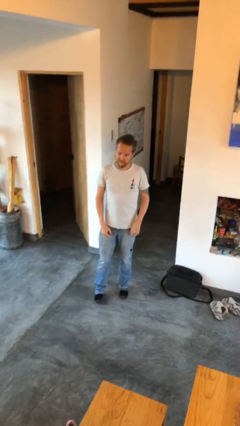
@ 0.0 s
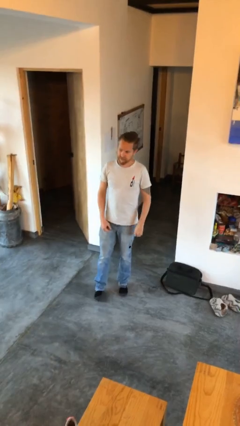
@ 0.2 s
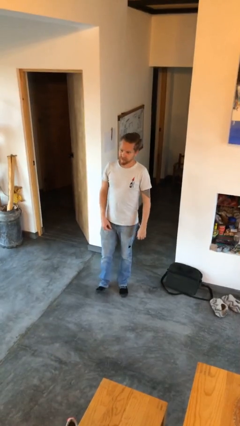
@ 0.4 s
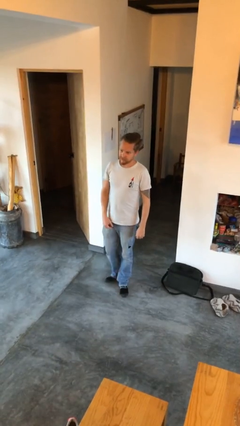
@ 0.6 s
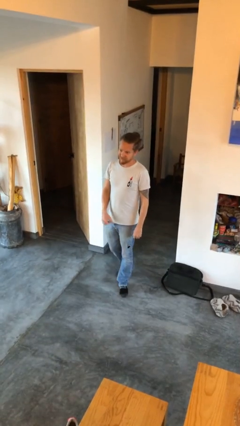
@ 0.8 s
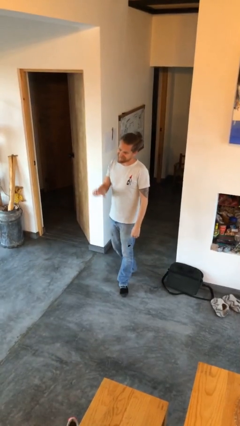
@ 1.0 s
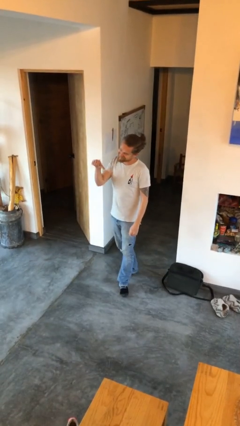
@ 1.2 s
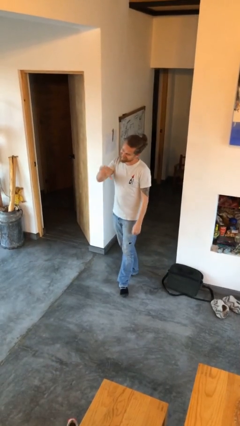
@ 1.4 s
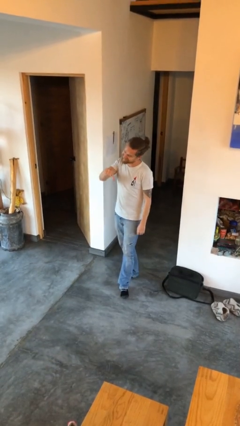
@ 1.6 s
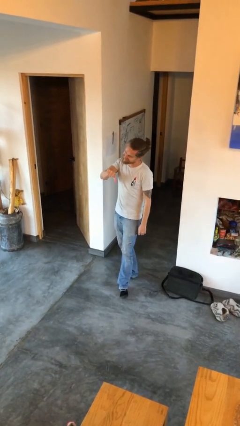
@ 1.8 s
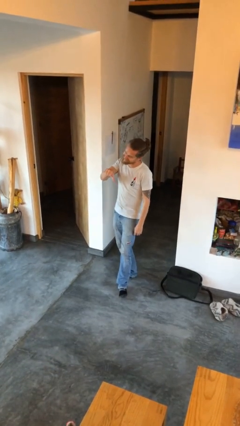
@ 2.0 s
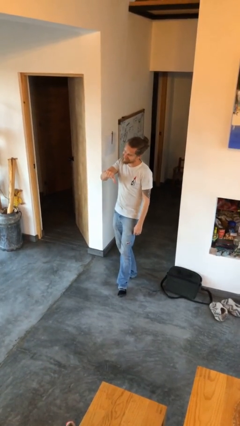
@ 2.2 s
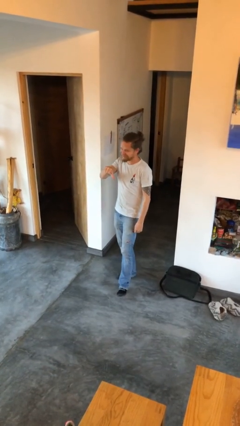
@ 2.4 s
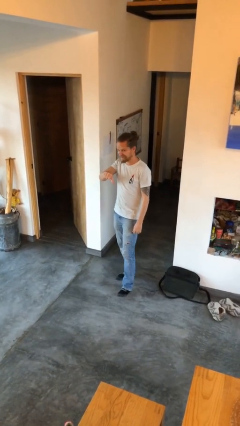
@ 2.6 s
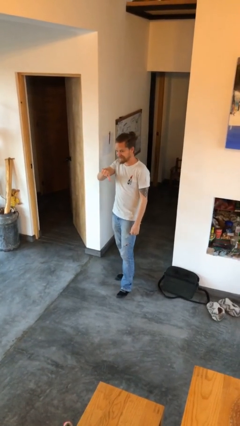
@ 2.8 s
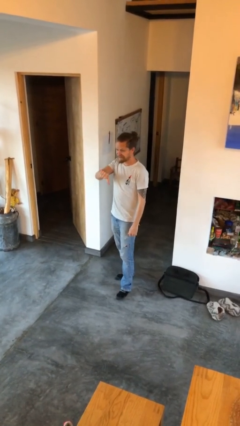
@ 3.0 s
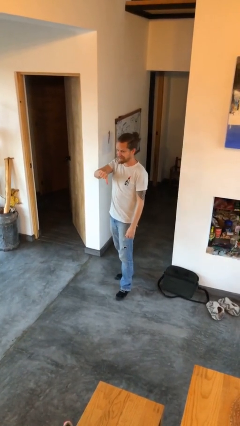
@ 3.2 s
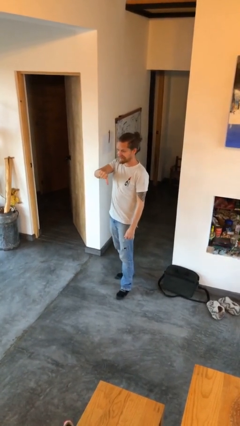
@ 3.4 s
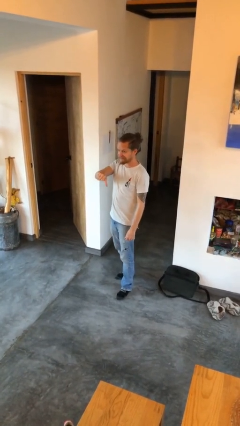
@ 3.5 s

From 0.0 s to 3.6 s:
person gestures thumbs down

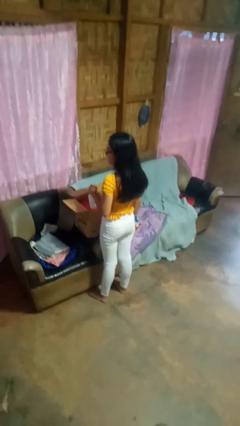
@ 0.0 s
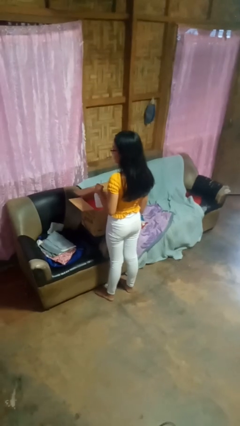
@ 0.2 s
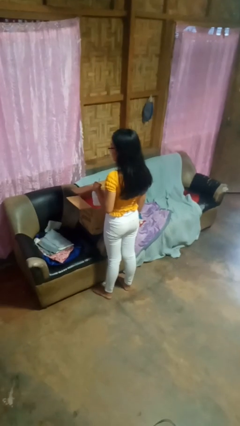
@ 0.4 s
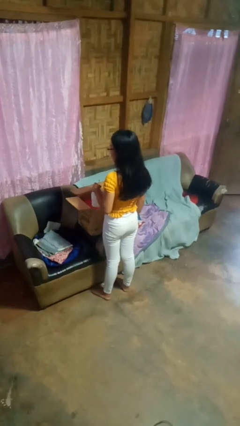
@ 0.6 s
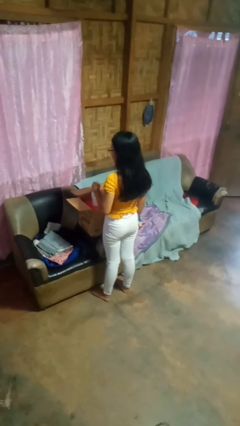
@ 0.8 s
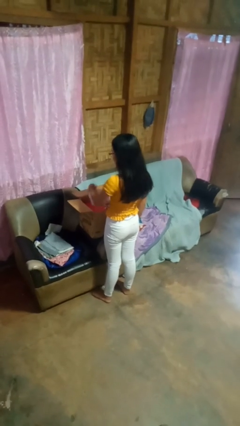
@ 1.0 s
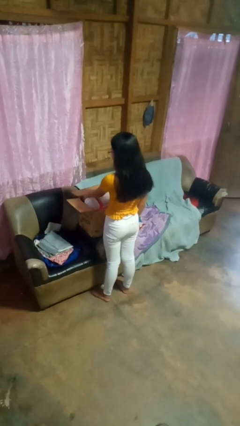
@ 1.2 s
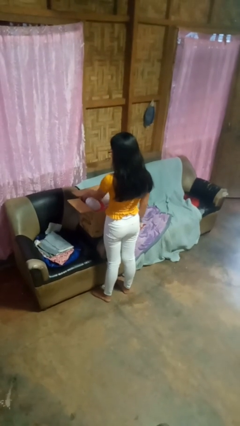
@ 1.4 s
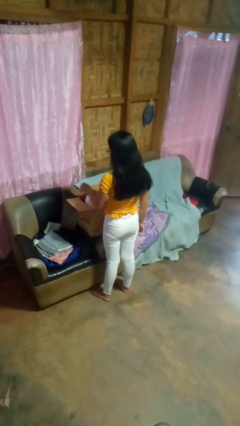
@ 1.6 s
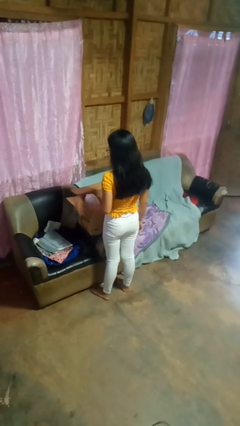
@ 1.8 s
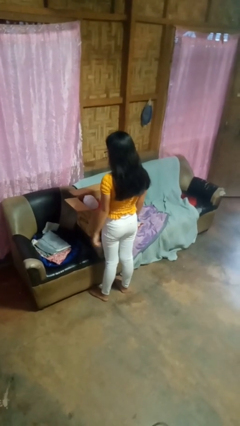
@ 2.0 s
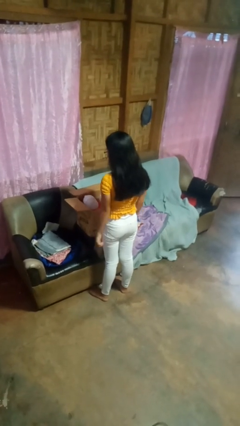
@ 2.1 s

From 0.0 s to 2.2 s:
person puts object into box

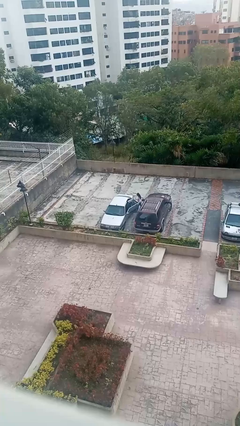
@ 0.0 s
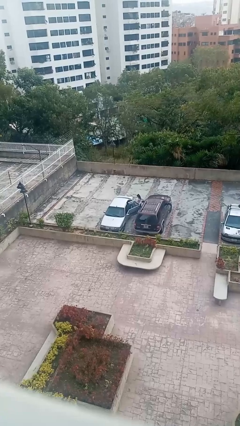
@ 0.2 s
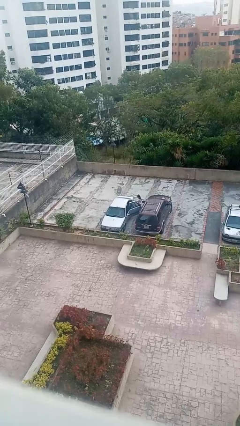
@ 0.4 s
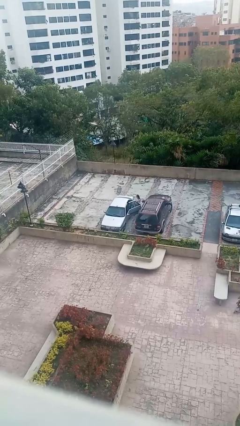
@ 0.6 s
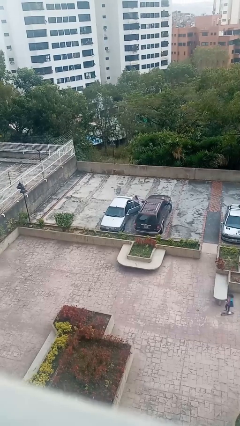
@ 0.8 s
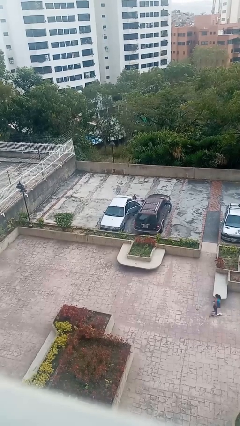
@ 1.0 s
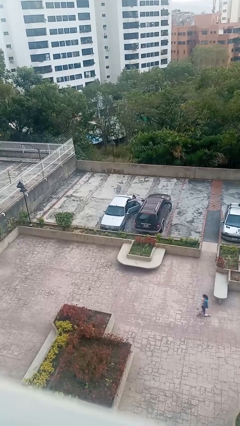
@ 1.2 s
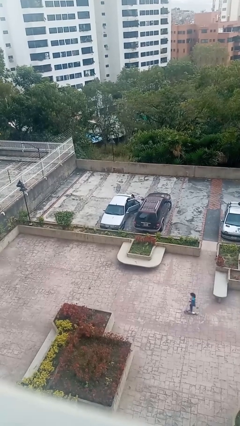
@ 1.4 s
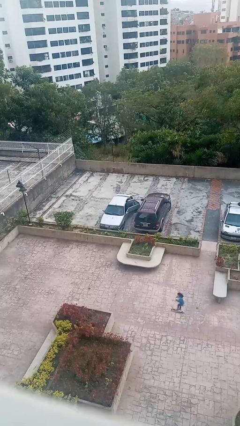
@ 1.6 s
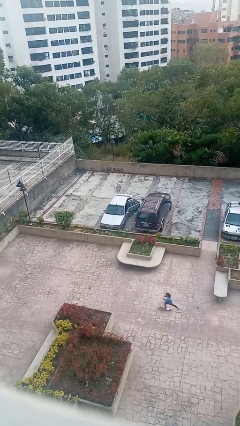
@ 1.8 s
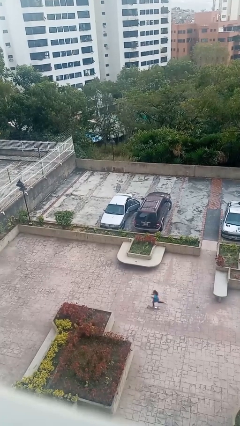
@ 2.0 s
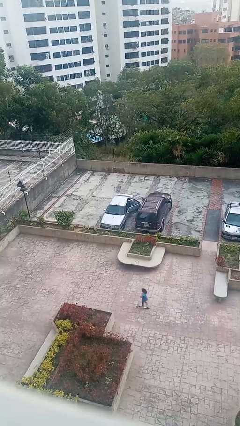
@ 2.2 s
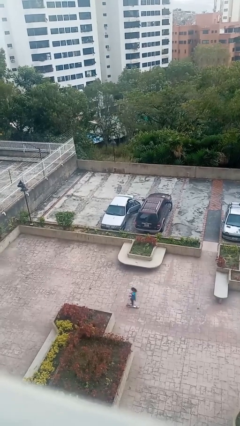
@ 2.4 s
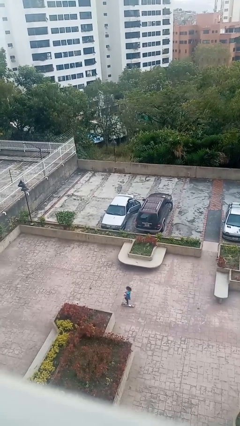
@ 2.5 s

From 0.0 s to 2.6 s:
car picks up person

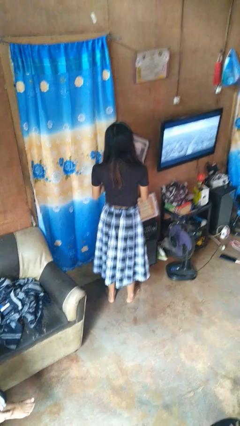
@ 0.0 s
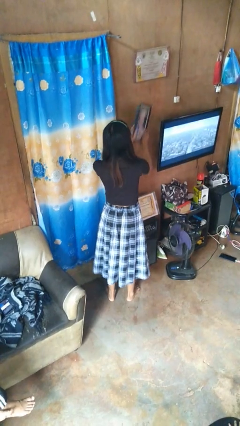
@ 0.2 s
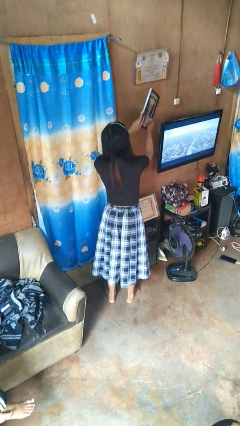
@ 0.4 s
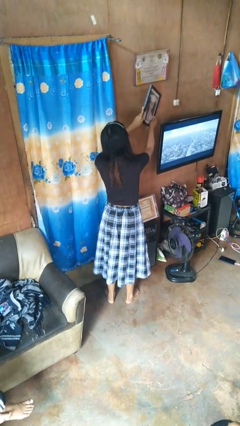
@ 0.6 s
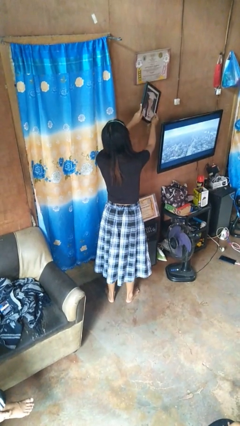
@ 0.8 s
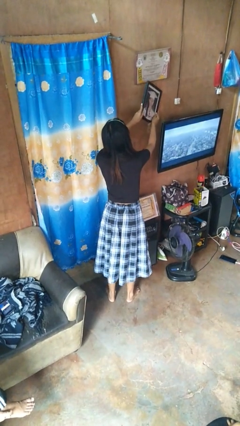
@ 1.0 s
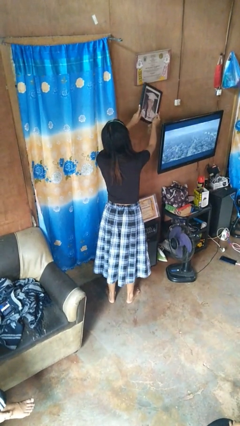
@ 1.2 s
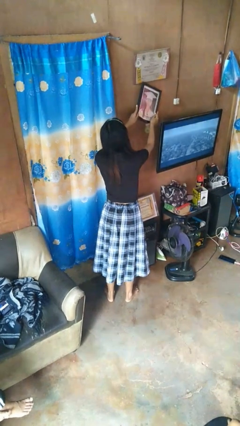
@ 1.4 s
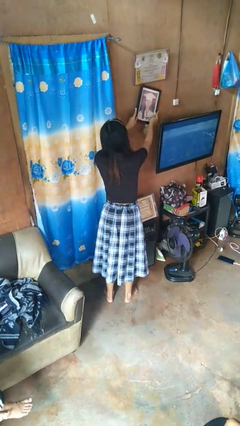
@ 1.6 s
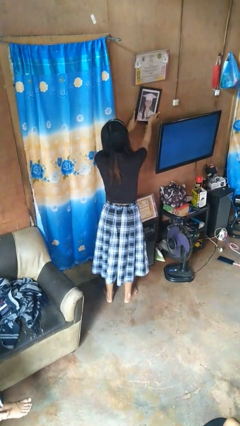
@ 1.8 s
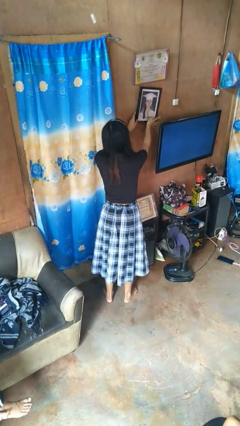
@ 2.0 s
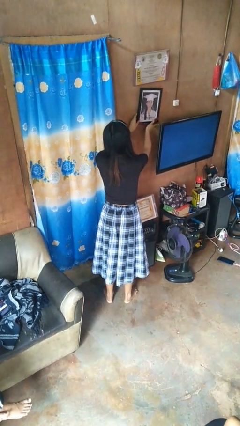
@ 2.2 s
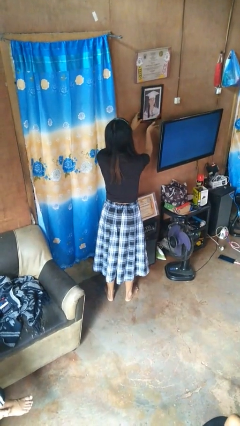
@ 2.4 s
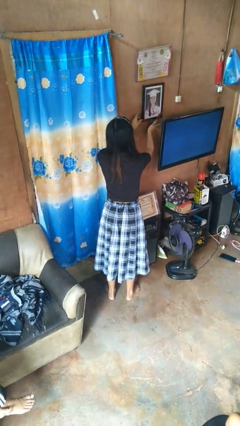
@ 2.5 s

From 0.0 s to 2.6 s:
person puts up picture frame

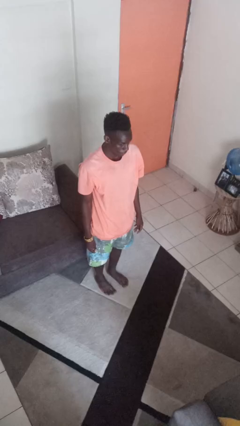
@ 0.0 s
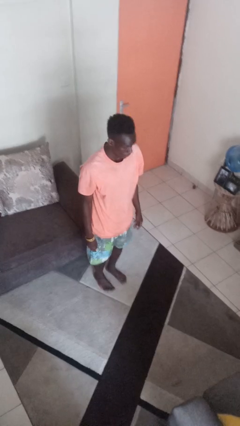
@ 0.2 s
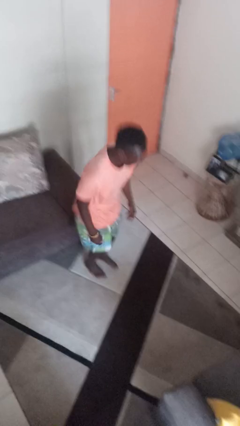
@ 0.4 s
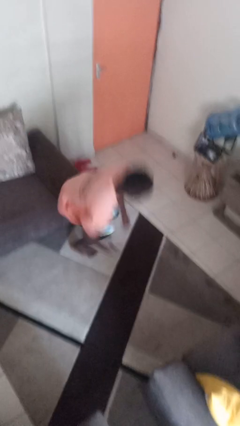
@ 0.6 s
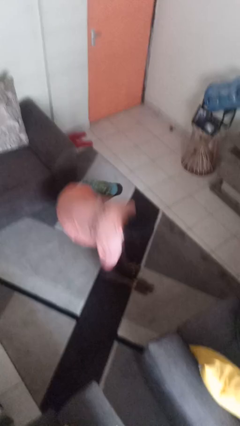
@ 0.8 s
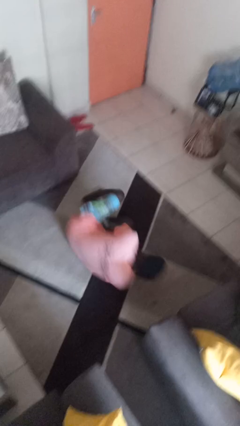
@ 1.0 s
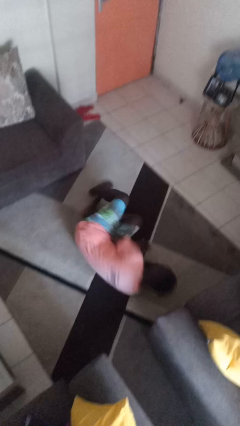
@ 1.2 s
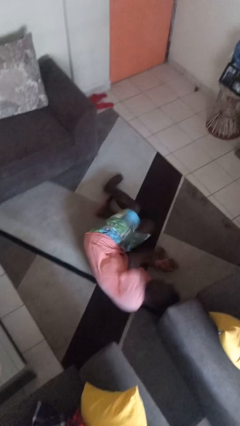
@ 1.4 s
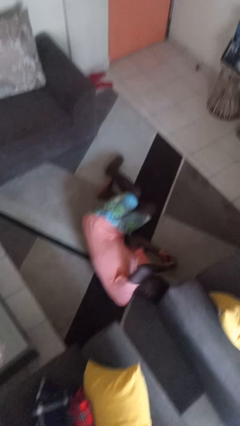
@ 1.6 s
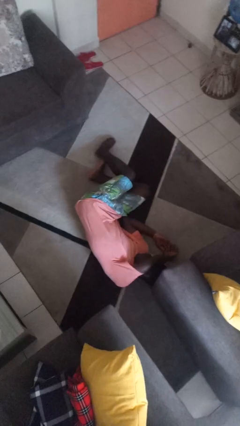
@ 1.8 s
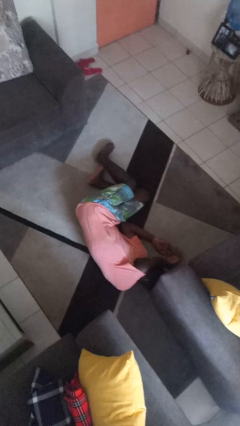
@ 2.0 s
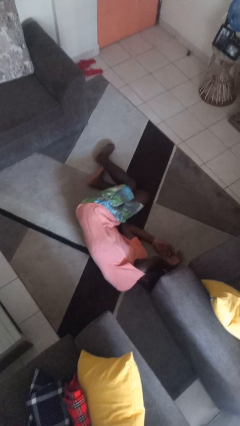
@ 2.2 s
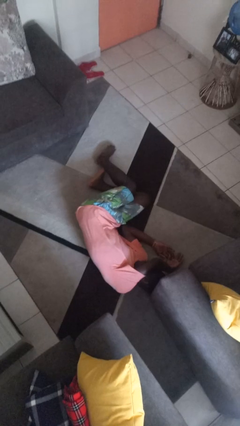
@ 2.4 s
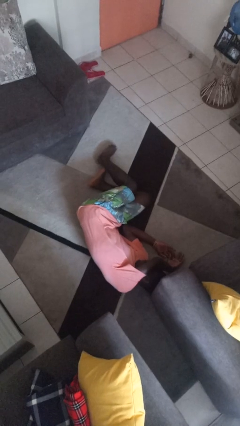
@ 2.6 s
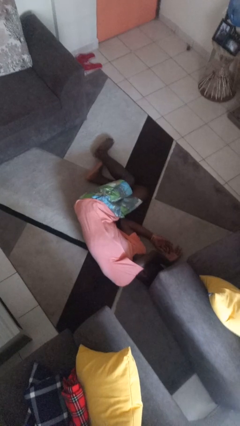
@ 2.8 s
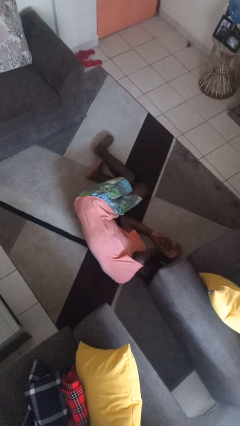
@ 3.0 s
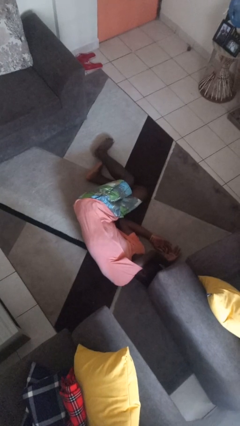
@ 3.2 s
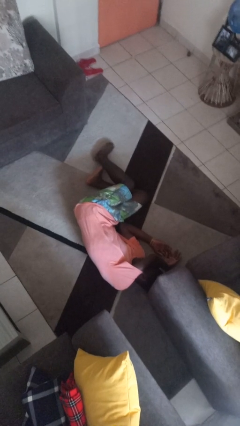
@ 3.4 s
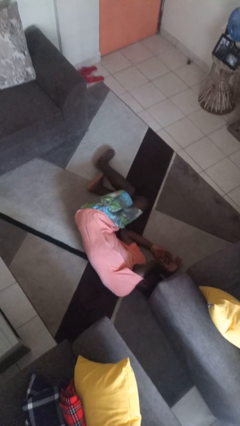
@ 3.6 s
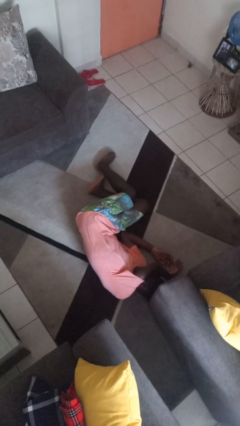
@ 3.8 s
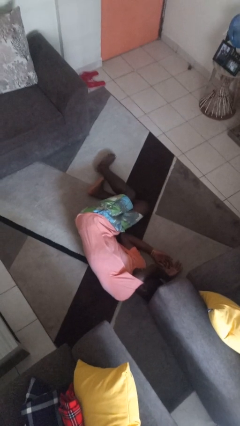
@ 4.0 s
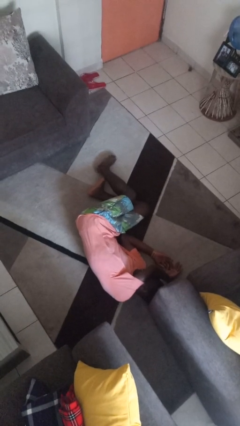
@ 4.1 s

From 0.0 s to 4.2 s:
person falls while standing

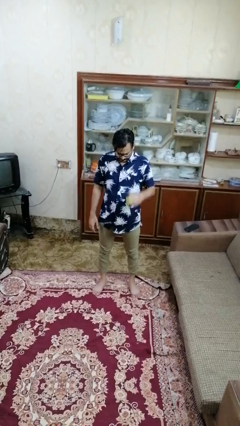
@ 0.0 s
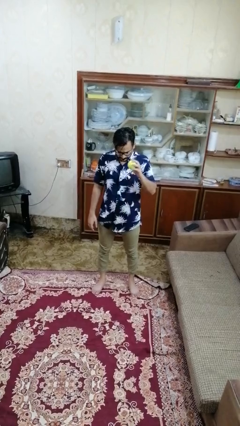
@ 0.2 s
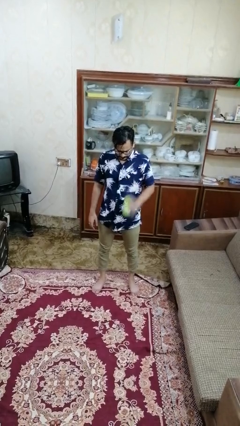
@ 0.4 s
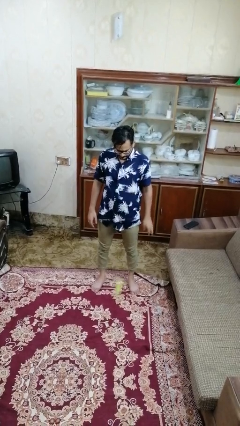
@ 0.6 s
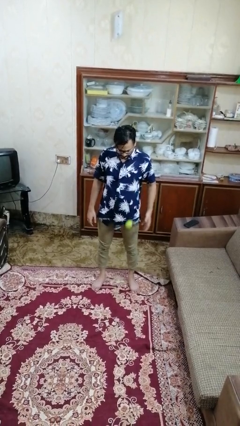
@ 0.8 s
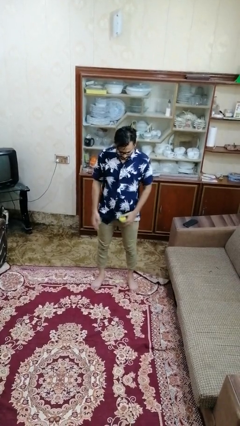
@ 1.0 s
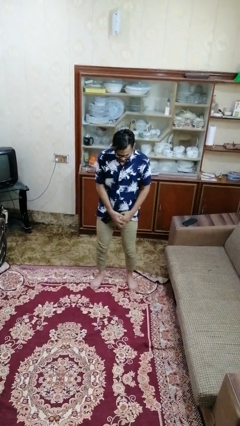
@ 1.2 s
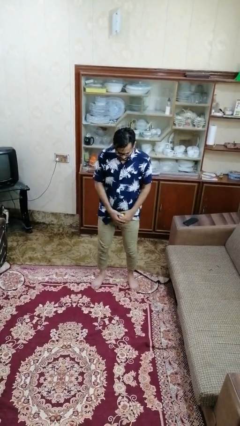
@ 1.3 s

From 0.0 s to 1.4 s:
person bounces ball on floor

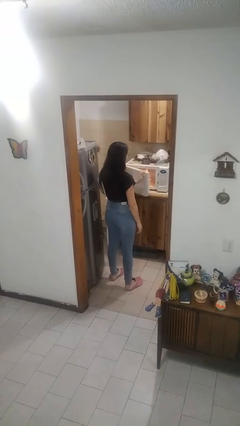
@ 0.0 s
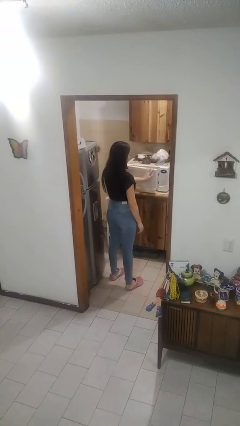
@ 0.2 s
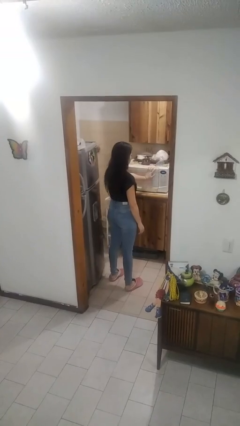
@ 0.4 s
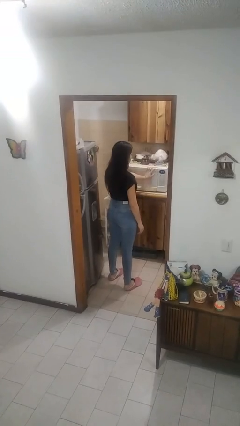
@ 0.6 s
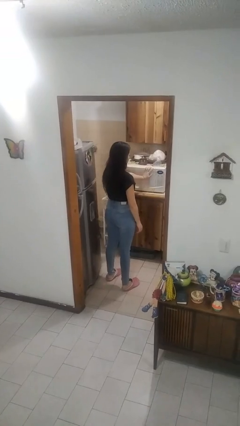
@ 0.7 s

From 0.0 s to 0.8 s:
person closes microwave
